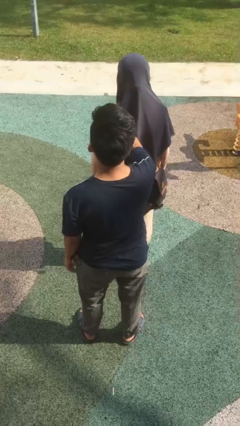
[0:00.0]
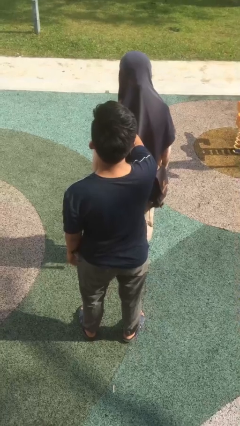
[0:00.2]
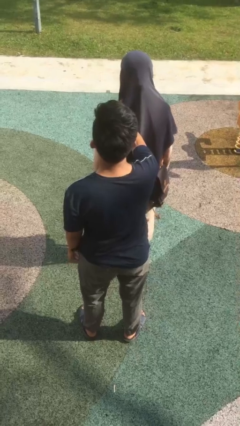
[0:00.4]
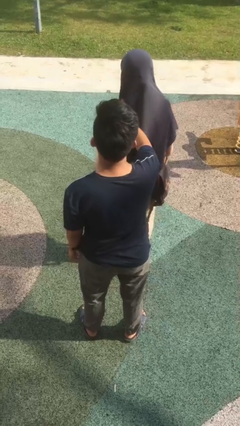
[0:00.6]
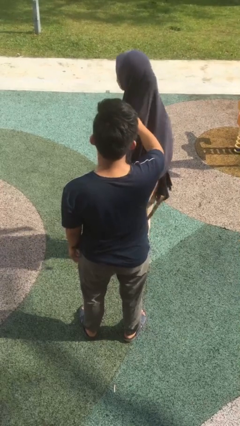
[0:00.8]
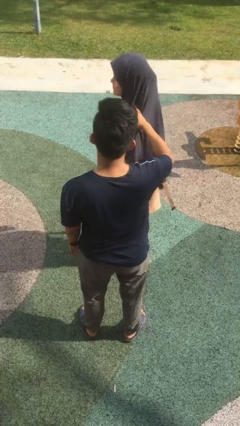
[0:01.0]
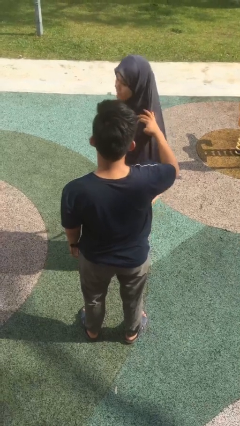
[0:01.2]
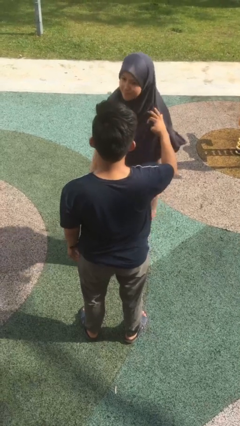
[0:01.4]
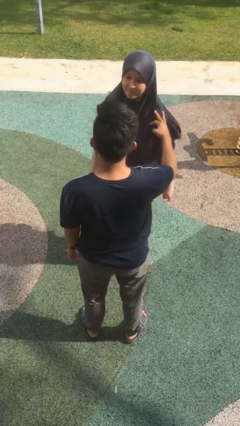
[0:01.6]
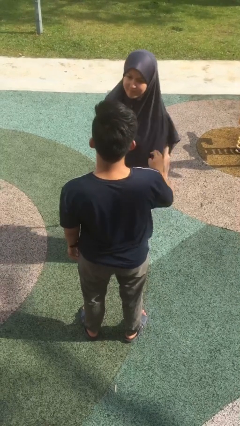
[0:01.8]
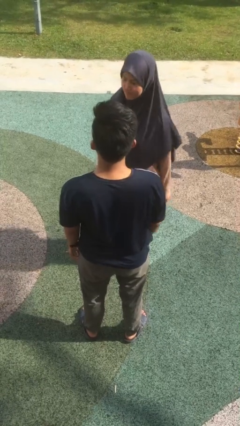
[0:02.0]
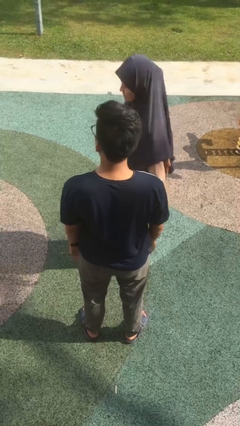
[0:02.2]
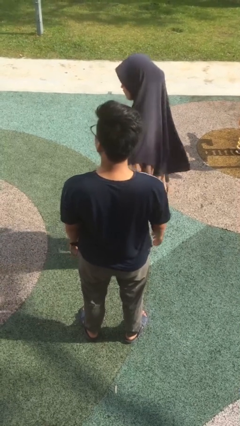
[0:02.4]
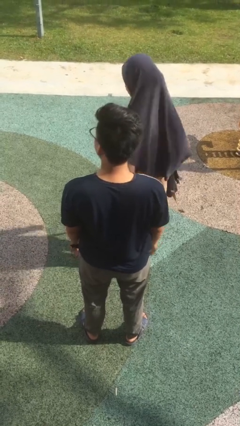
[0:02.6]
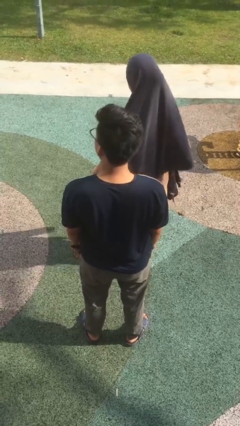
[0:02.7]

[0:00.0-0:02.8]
person spins person around

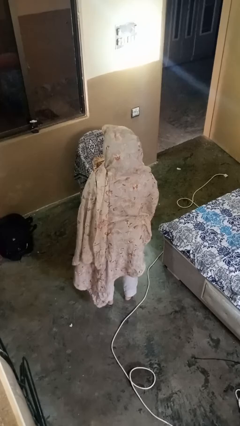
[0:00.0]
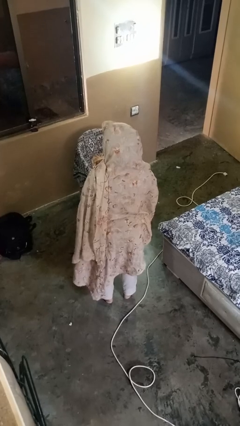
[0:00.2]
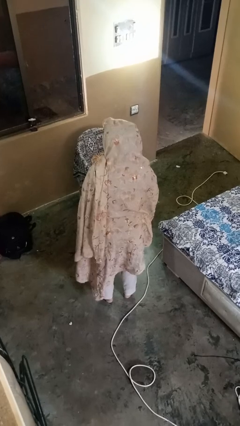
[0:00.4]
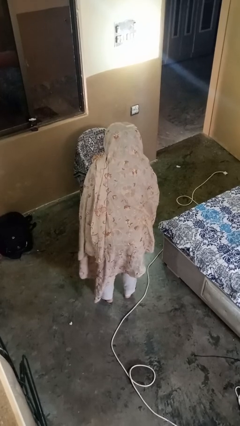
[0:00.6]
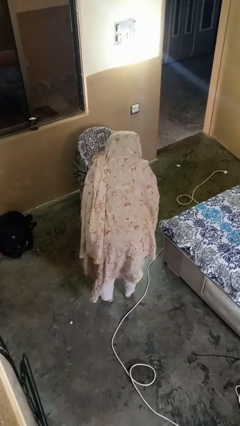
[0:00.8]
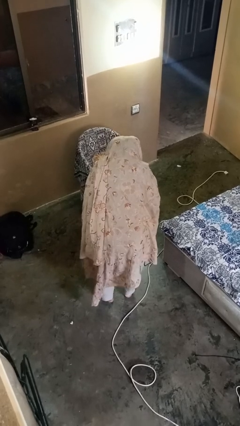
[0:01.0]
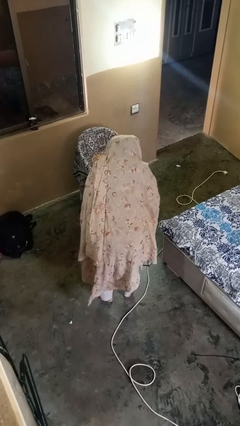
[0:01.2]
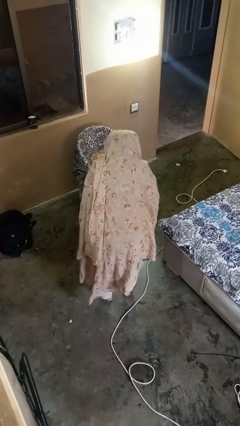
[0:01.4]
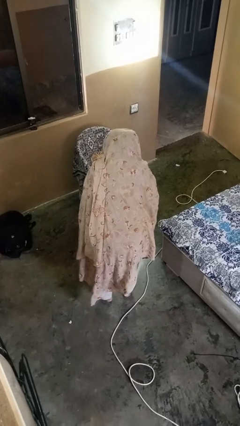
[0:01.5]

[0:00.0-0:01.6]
person bows

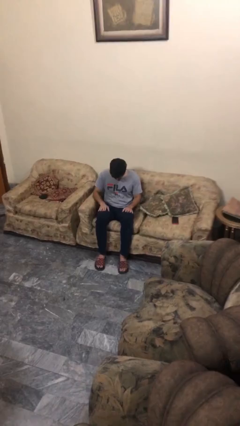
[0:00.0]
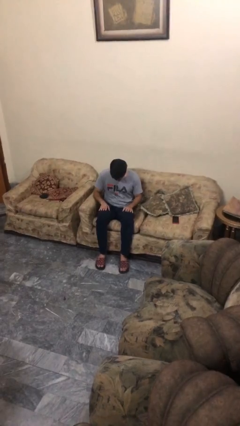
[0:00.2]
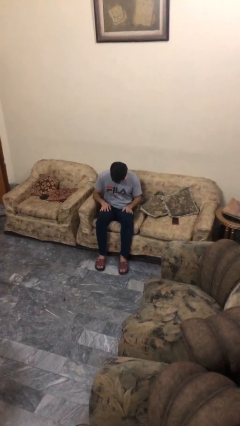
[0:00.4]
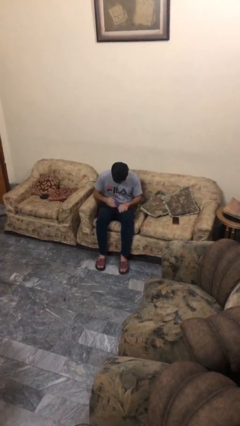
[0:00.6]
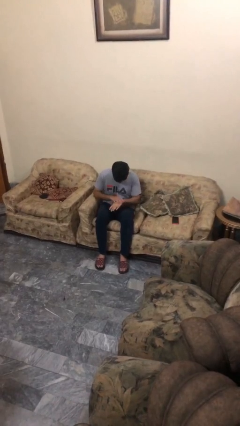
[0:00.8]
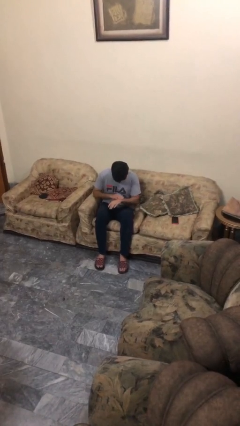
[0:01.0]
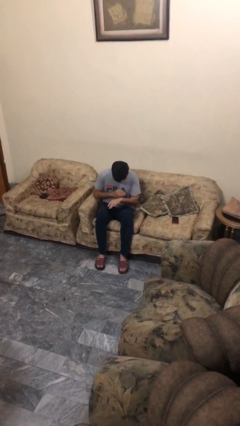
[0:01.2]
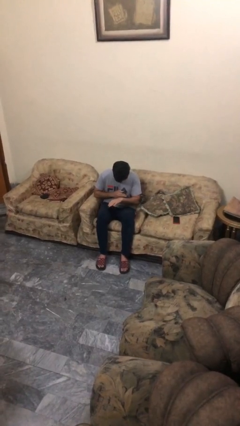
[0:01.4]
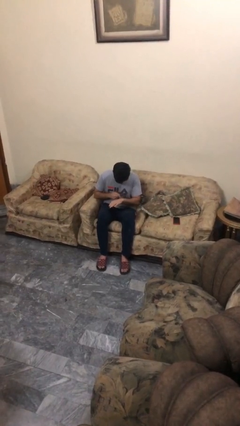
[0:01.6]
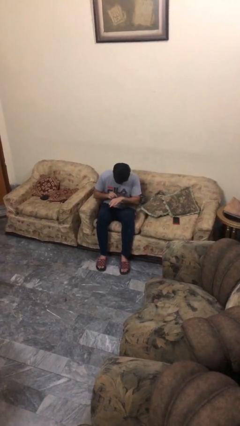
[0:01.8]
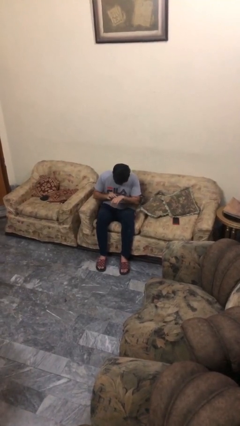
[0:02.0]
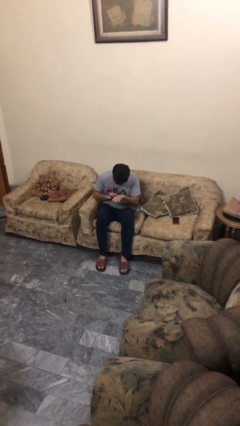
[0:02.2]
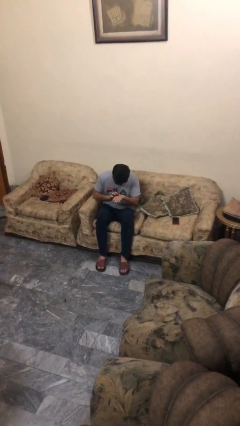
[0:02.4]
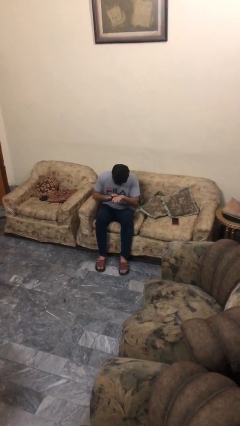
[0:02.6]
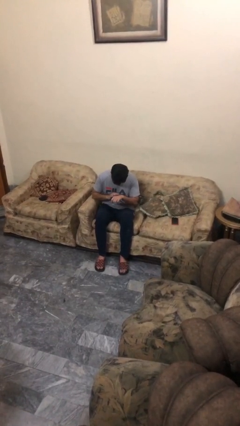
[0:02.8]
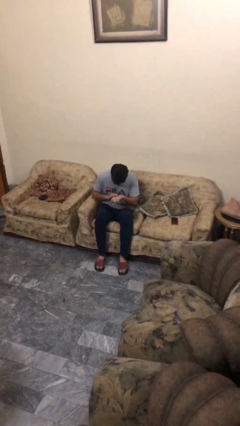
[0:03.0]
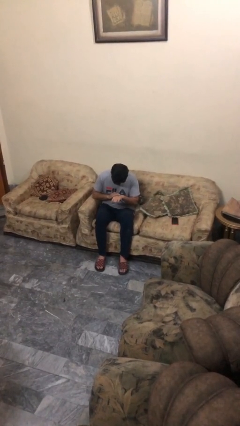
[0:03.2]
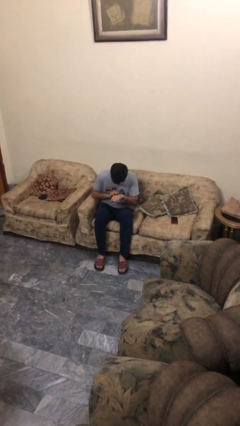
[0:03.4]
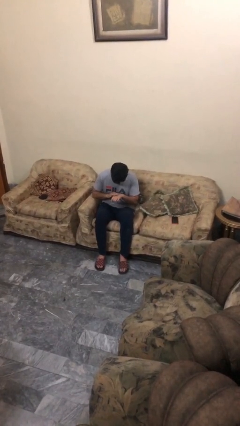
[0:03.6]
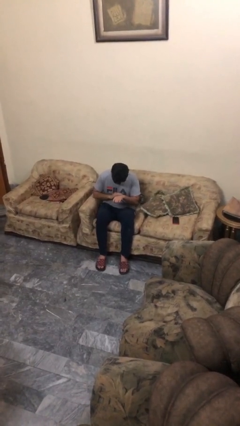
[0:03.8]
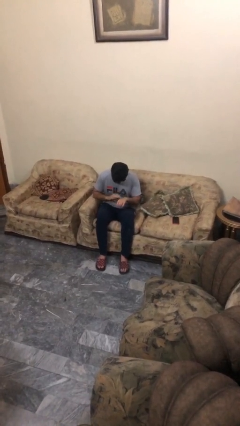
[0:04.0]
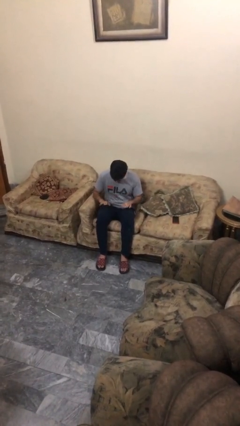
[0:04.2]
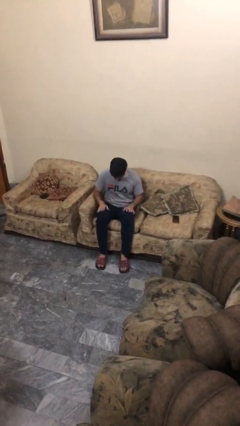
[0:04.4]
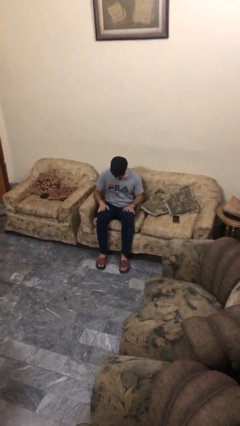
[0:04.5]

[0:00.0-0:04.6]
person looks at hands in lap

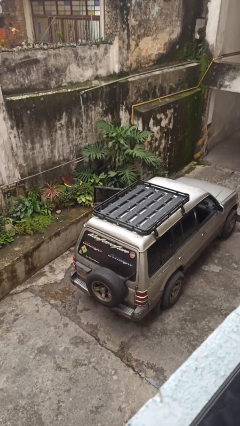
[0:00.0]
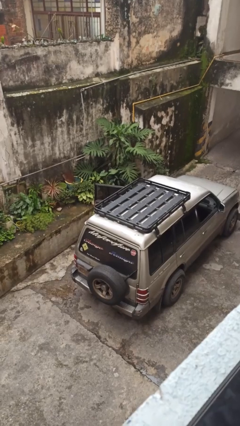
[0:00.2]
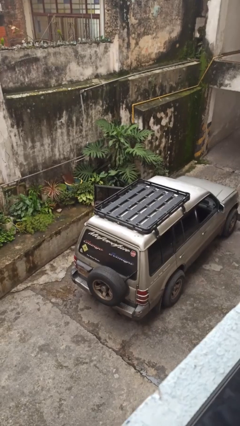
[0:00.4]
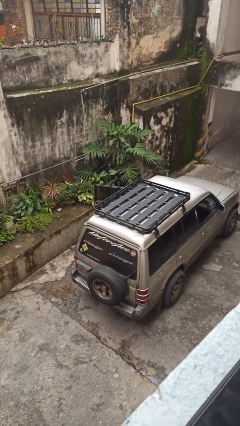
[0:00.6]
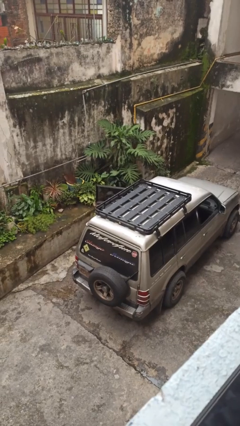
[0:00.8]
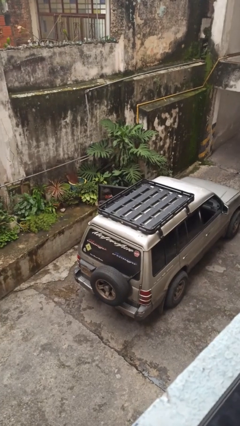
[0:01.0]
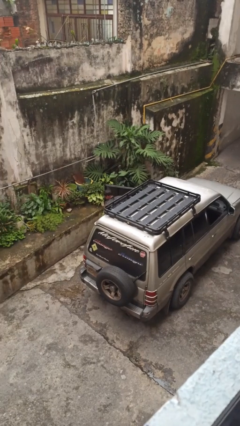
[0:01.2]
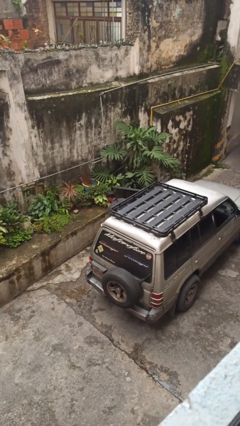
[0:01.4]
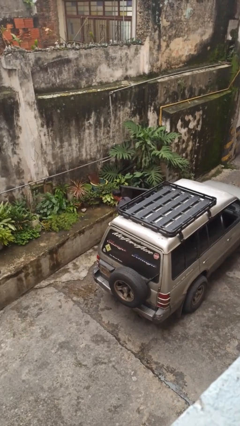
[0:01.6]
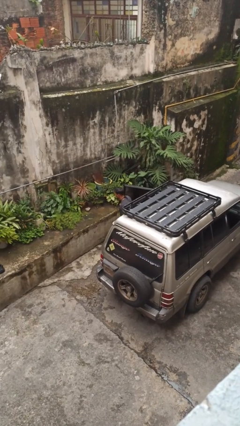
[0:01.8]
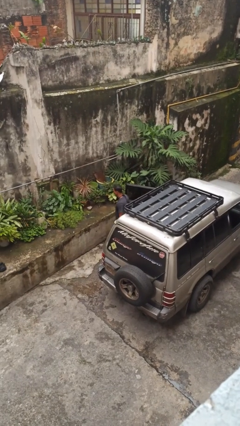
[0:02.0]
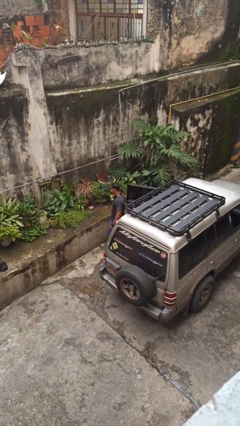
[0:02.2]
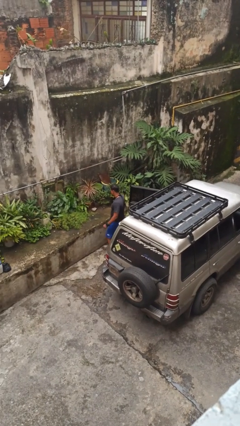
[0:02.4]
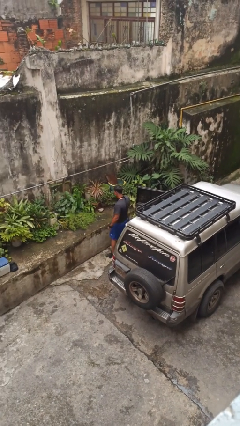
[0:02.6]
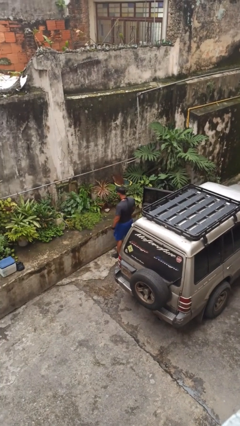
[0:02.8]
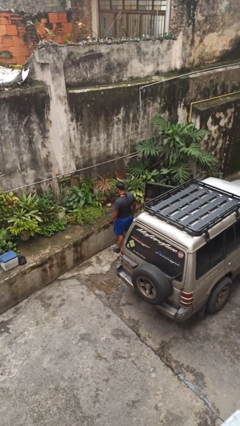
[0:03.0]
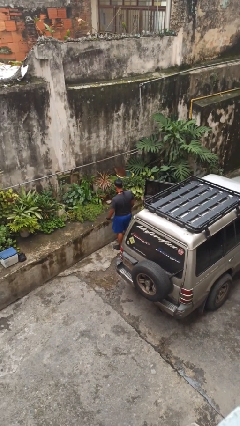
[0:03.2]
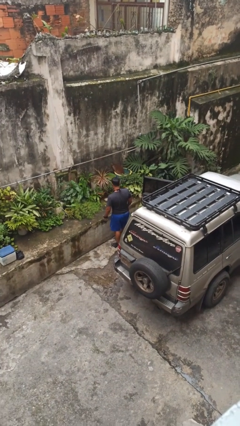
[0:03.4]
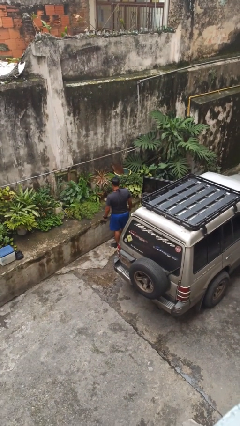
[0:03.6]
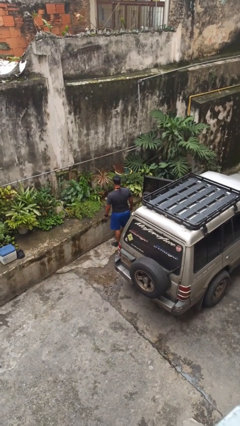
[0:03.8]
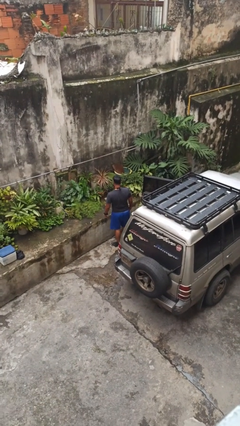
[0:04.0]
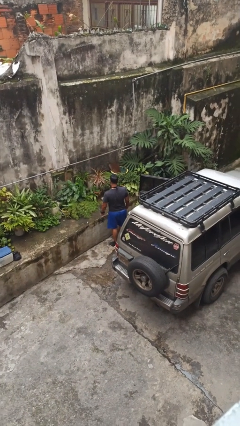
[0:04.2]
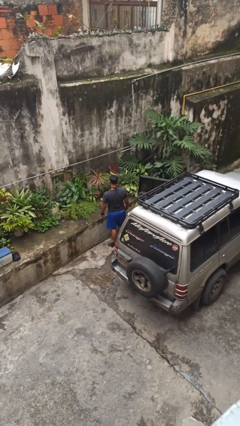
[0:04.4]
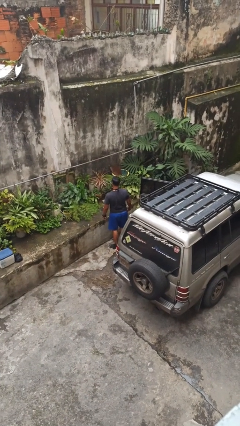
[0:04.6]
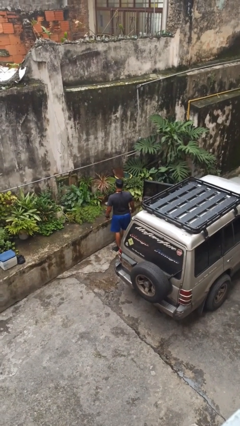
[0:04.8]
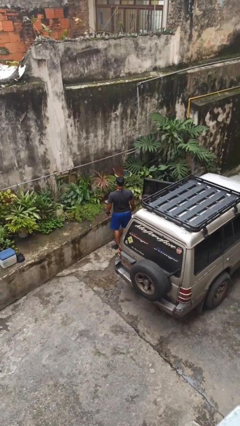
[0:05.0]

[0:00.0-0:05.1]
person exits car

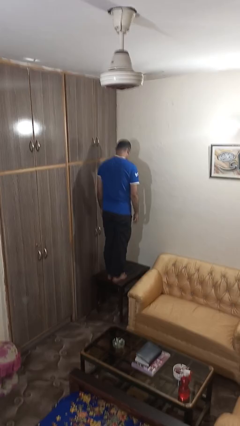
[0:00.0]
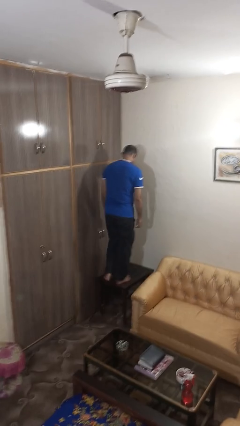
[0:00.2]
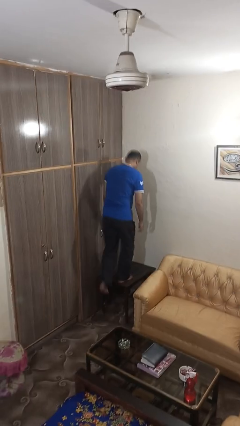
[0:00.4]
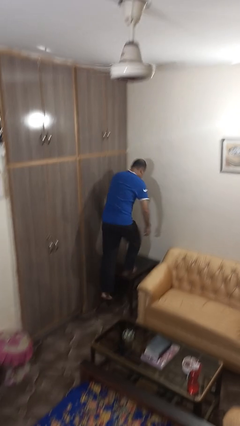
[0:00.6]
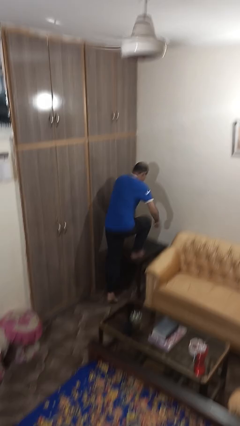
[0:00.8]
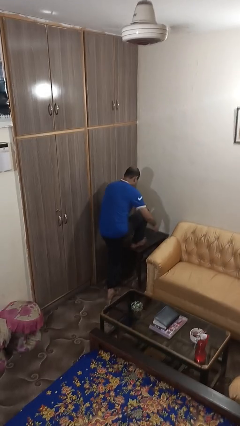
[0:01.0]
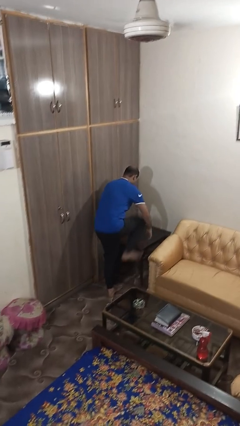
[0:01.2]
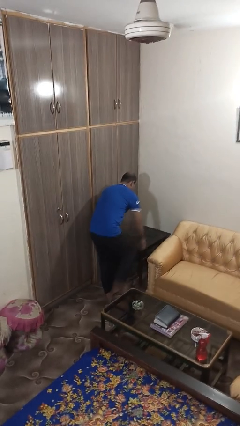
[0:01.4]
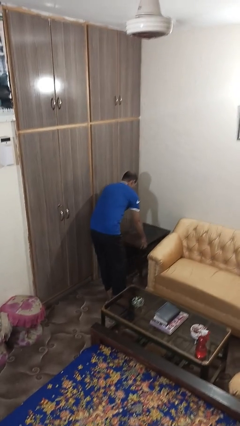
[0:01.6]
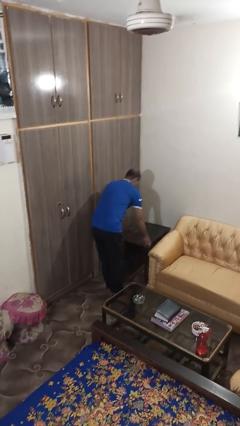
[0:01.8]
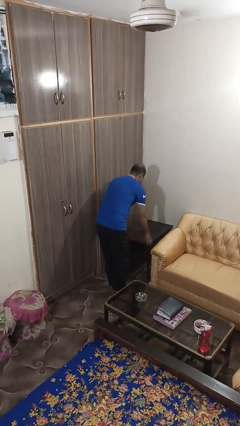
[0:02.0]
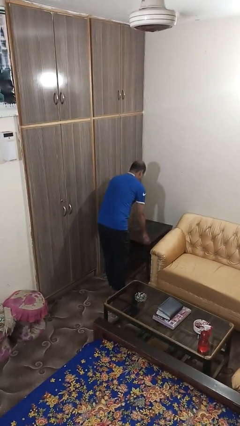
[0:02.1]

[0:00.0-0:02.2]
person climbs off table

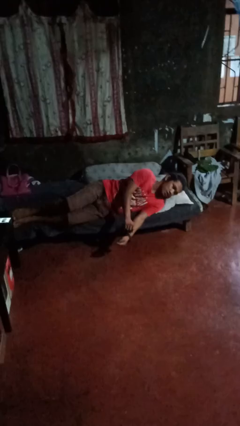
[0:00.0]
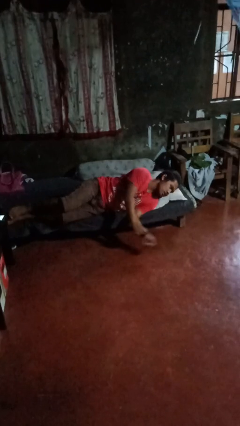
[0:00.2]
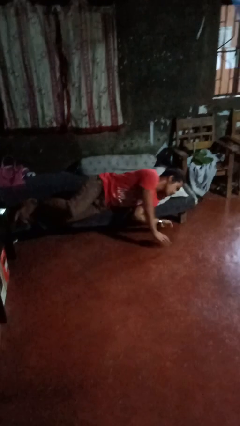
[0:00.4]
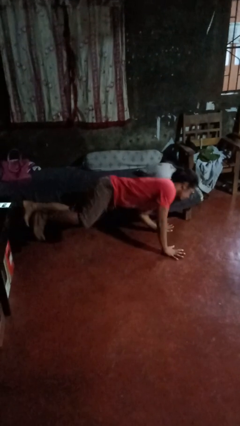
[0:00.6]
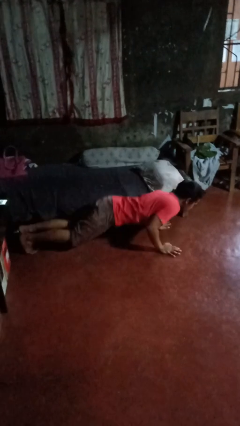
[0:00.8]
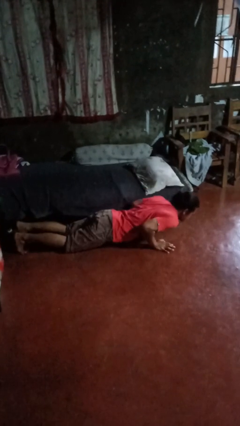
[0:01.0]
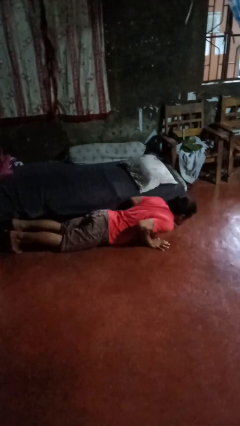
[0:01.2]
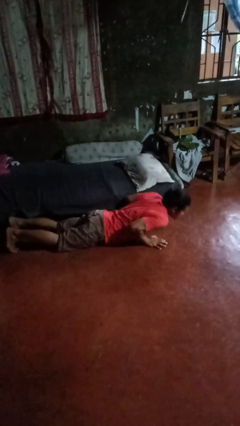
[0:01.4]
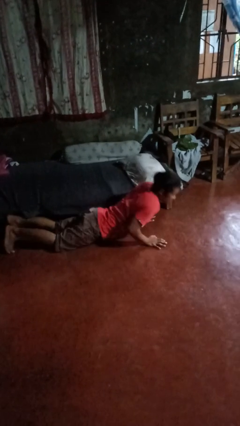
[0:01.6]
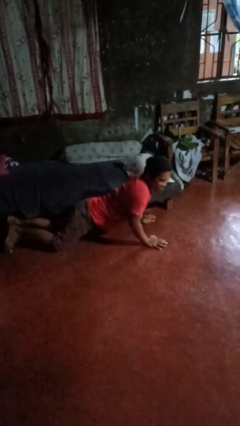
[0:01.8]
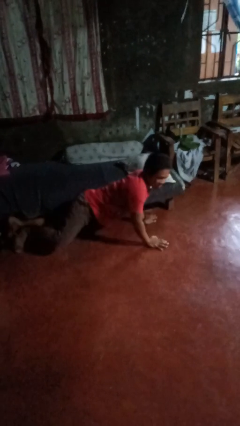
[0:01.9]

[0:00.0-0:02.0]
person falls from bed
